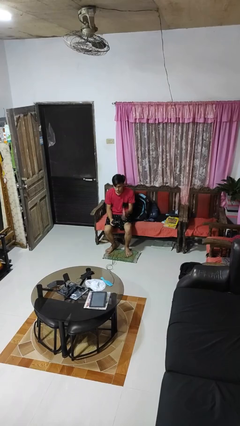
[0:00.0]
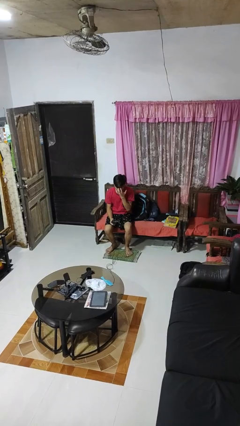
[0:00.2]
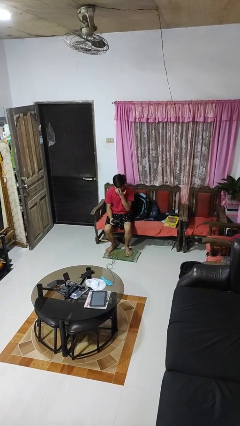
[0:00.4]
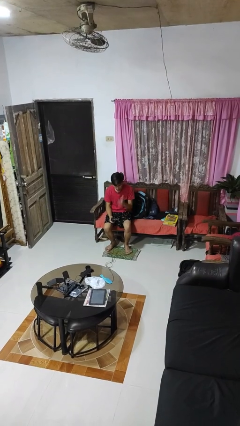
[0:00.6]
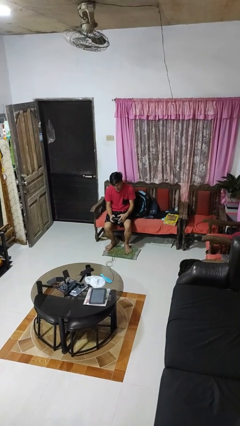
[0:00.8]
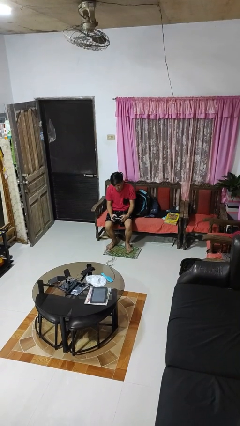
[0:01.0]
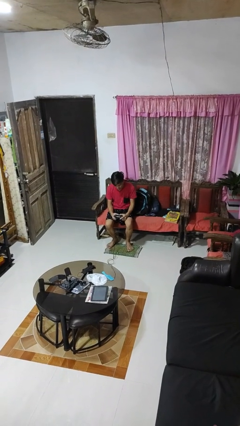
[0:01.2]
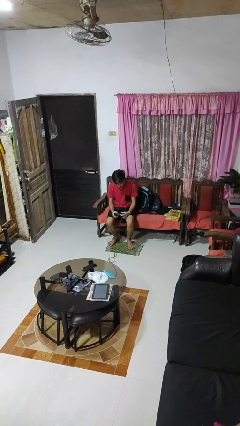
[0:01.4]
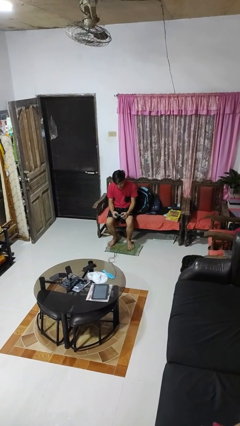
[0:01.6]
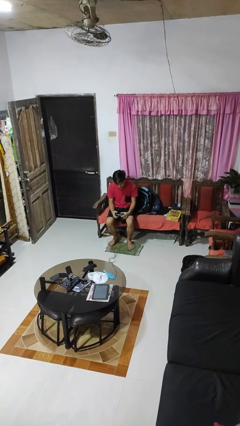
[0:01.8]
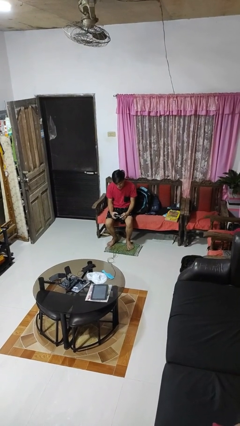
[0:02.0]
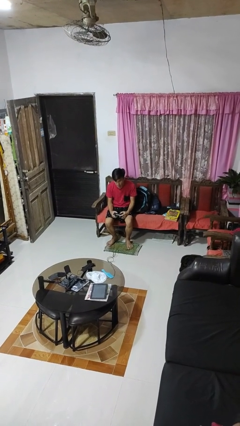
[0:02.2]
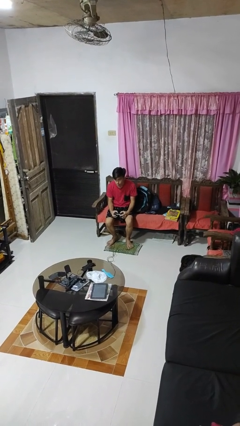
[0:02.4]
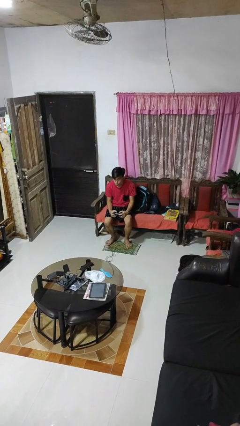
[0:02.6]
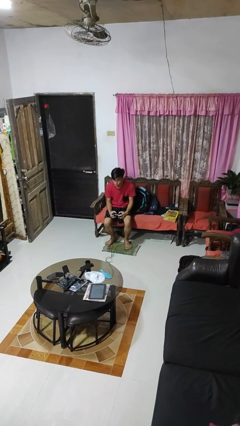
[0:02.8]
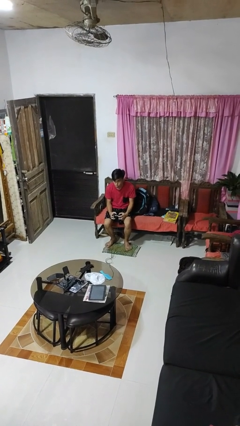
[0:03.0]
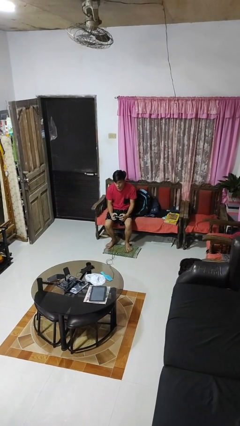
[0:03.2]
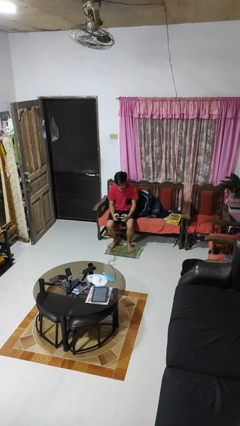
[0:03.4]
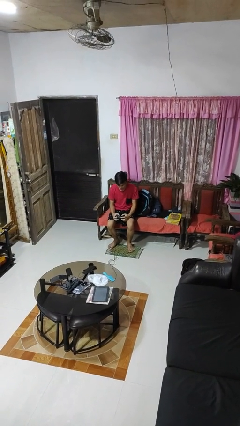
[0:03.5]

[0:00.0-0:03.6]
person interacts with handheld game

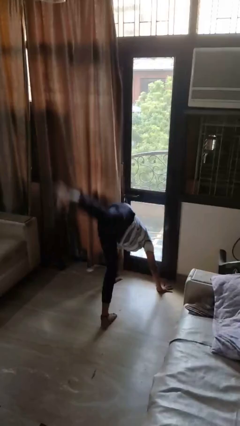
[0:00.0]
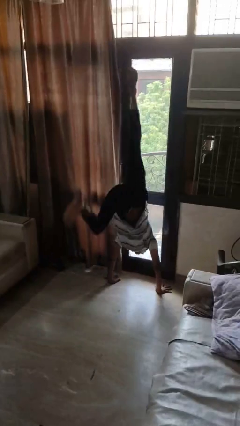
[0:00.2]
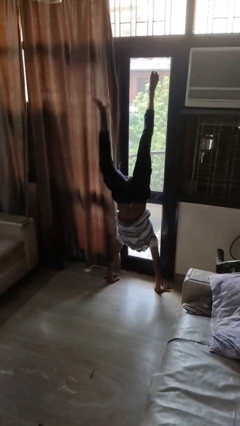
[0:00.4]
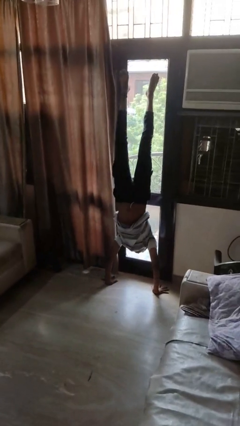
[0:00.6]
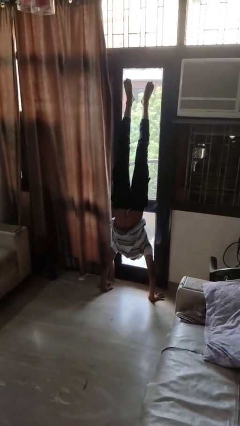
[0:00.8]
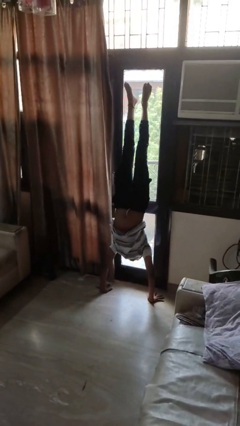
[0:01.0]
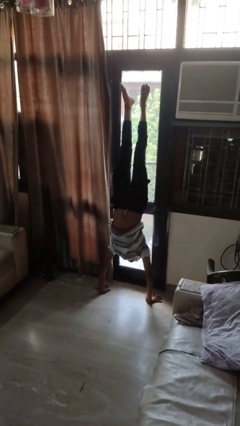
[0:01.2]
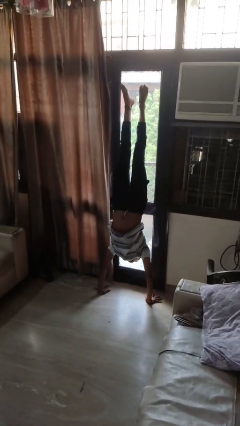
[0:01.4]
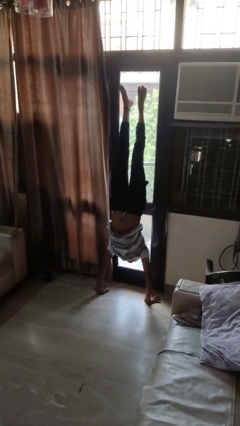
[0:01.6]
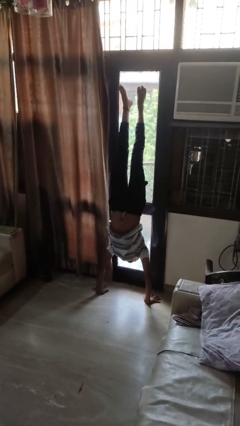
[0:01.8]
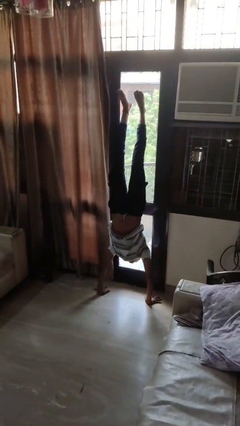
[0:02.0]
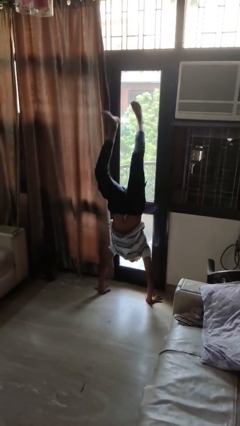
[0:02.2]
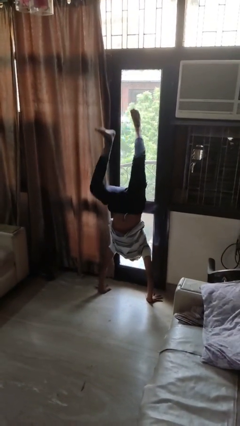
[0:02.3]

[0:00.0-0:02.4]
person handstand

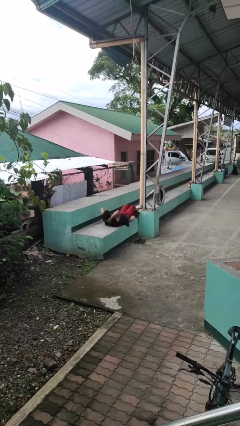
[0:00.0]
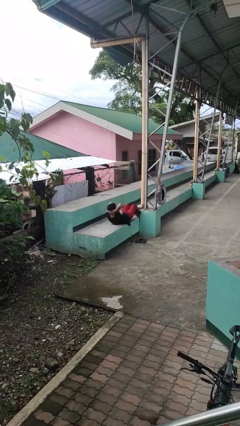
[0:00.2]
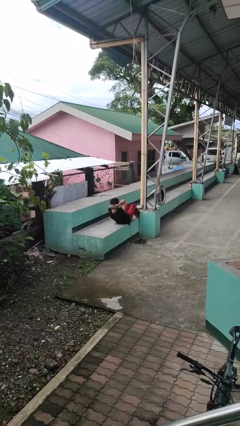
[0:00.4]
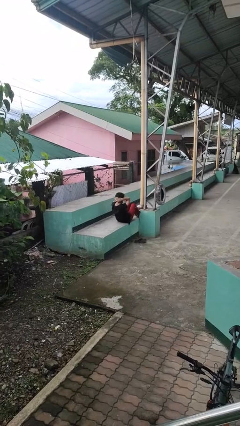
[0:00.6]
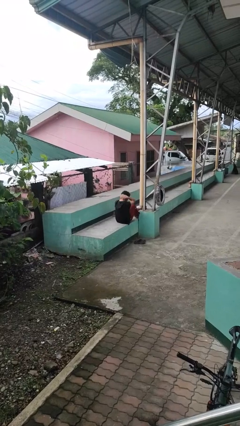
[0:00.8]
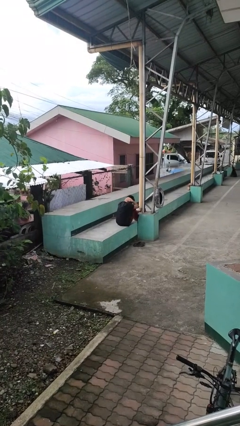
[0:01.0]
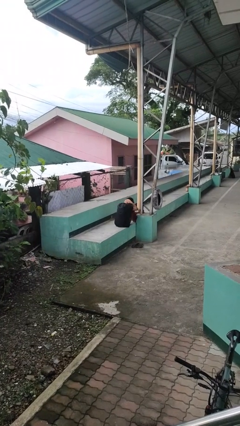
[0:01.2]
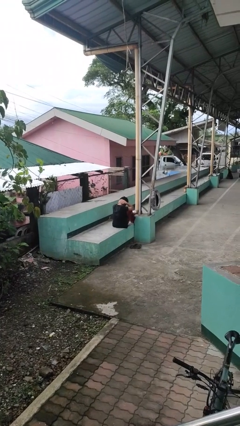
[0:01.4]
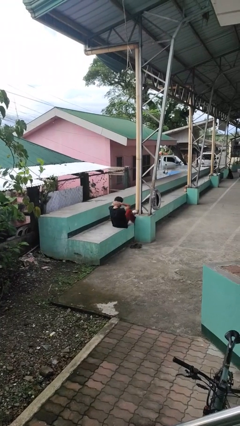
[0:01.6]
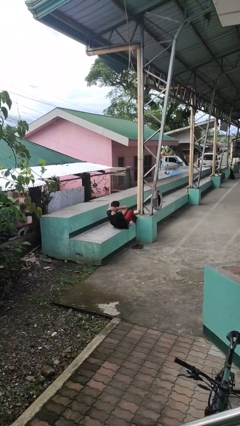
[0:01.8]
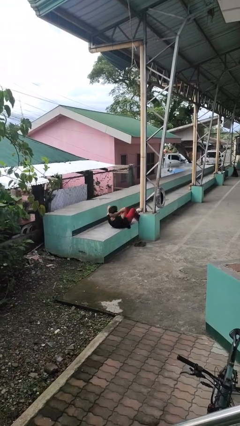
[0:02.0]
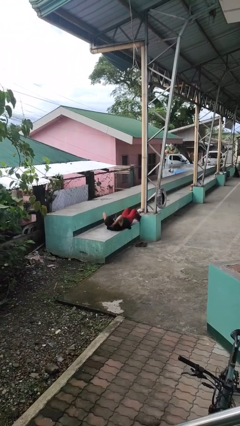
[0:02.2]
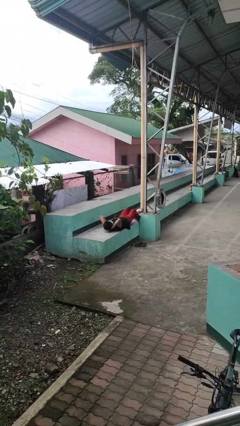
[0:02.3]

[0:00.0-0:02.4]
person exercises with situp

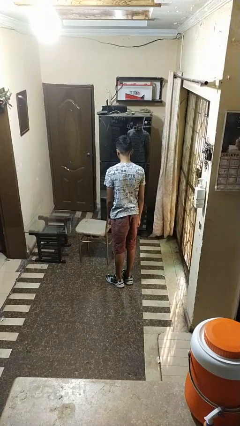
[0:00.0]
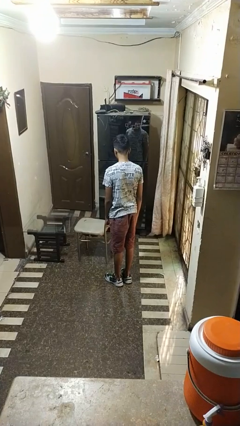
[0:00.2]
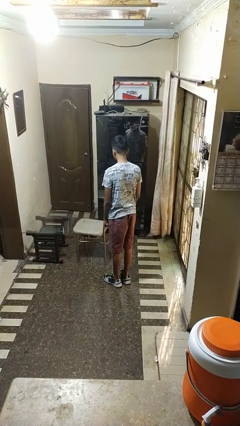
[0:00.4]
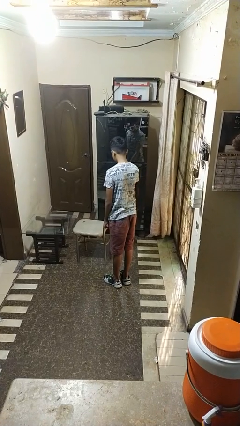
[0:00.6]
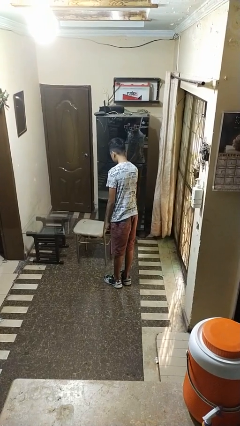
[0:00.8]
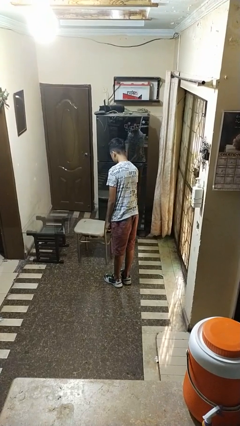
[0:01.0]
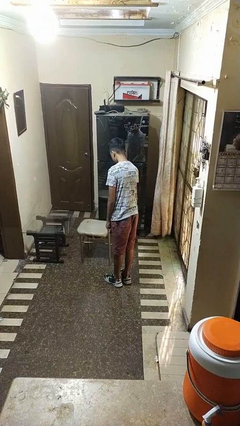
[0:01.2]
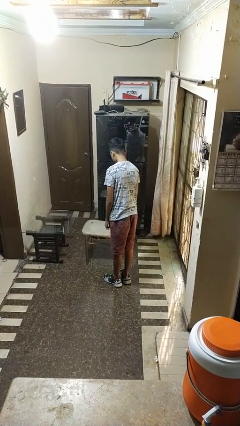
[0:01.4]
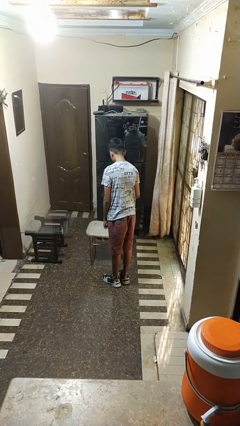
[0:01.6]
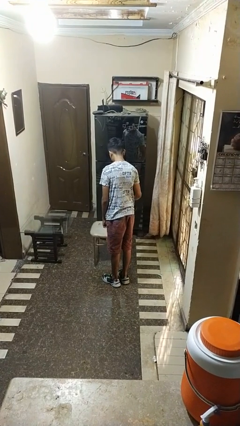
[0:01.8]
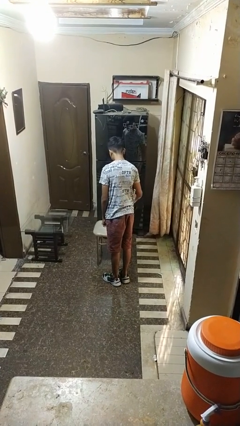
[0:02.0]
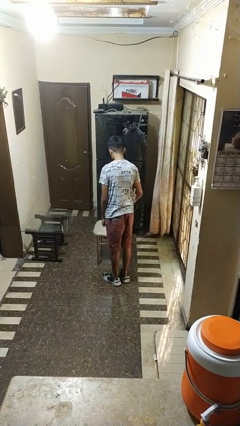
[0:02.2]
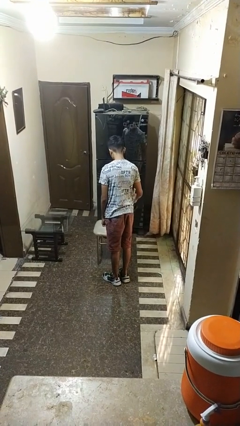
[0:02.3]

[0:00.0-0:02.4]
person pulls out chair

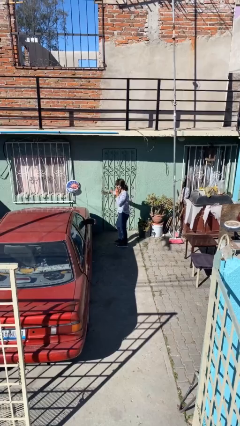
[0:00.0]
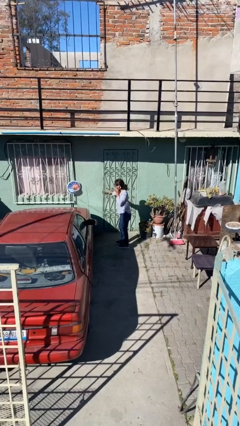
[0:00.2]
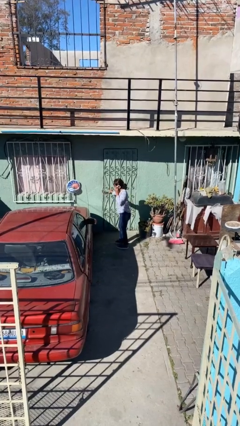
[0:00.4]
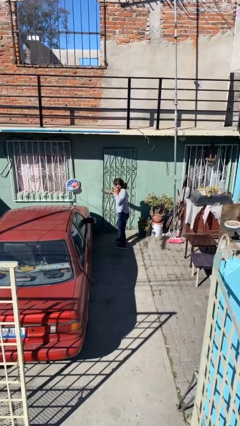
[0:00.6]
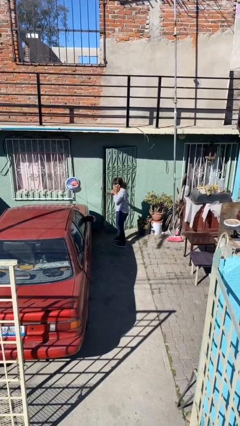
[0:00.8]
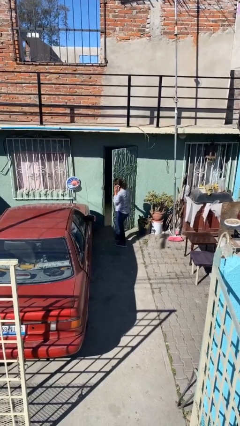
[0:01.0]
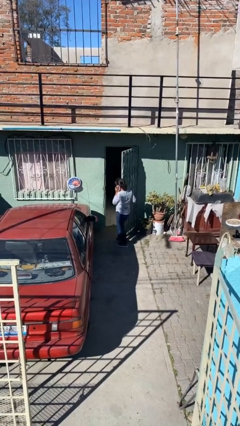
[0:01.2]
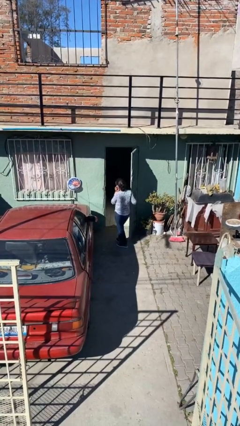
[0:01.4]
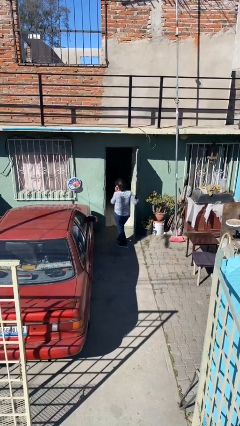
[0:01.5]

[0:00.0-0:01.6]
person opens facility door

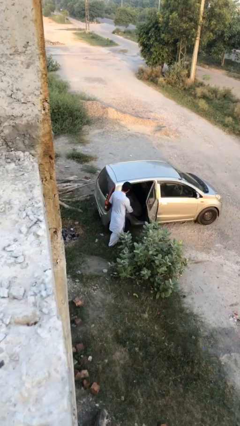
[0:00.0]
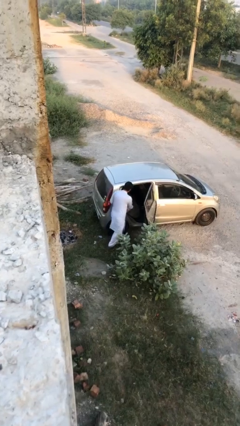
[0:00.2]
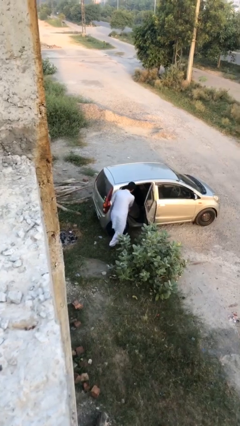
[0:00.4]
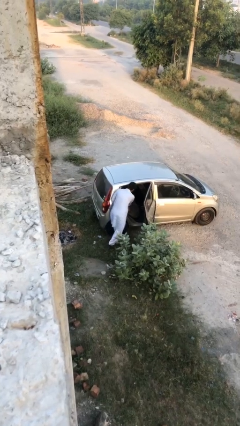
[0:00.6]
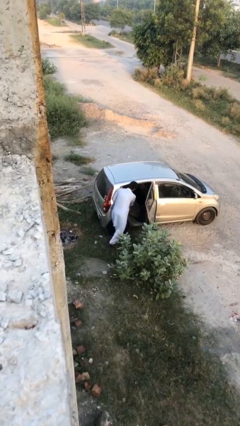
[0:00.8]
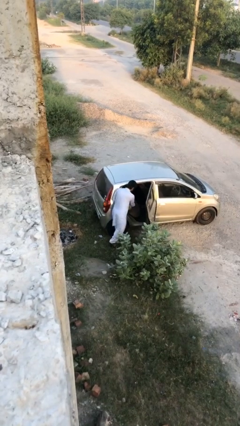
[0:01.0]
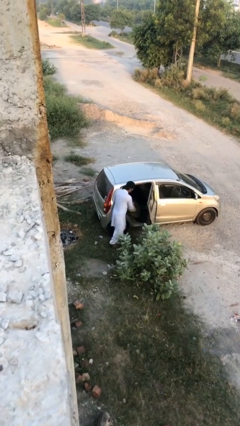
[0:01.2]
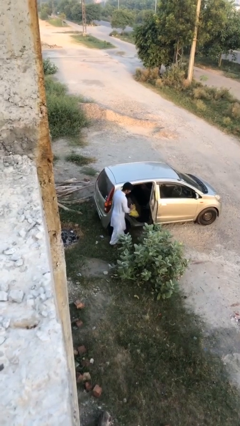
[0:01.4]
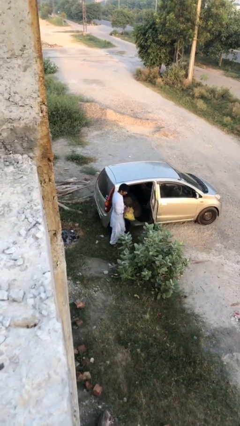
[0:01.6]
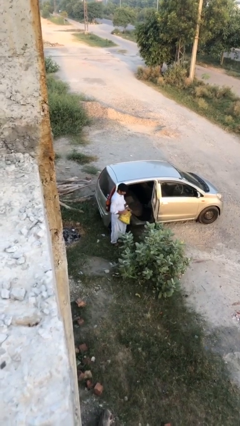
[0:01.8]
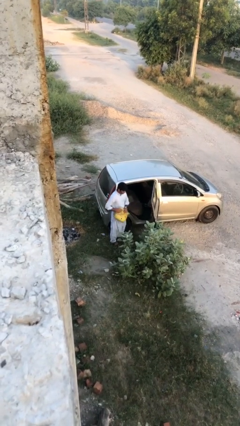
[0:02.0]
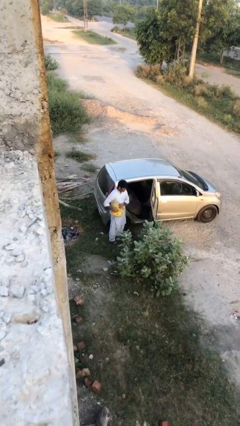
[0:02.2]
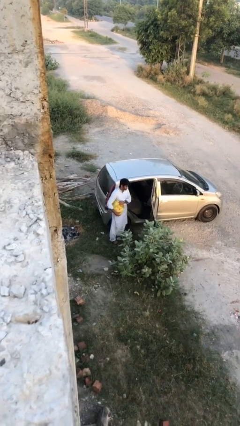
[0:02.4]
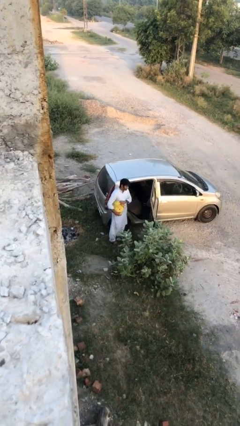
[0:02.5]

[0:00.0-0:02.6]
person unloads car

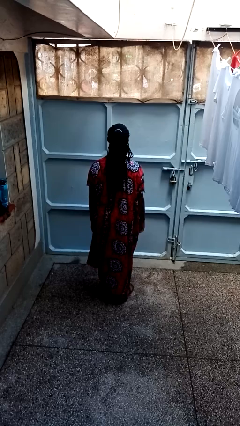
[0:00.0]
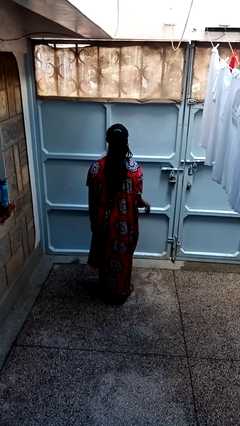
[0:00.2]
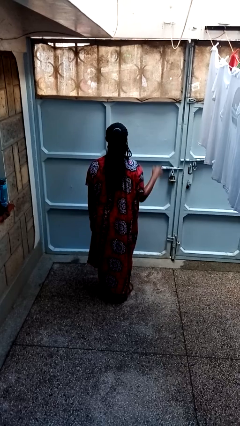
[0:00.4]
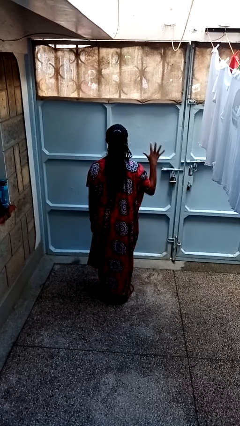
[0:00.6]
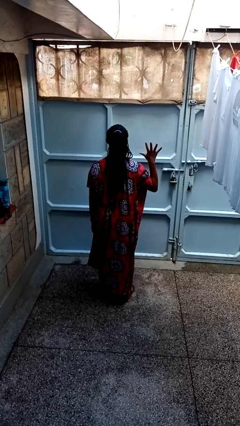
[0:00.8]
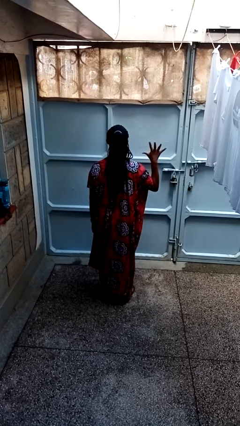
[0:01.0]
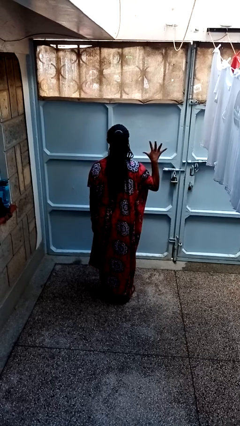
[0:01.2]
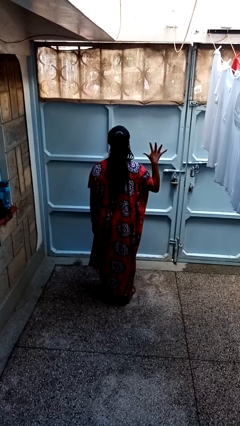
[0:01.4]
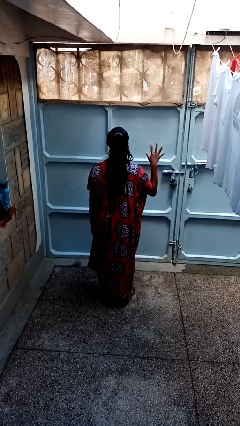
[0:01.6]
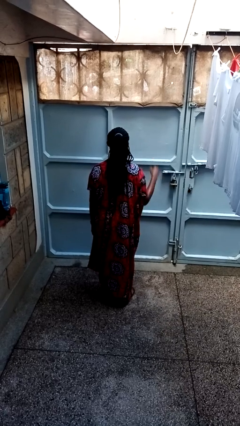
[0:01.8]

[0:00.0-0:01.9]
person gestures number five

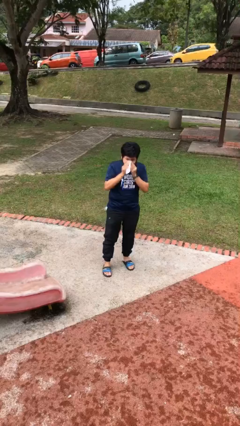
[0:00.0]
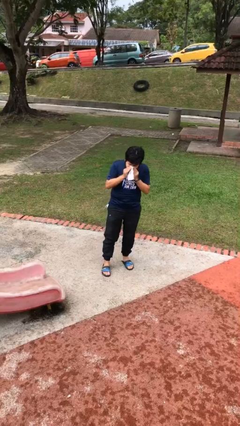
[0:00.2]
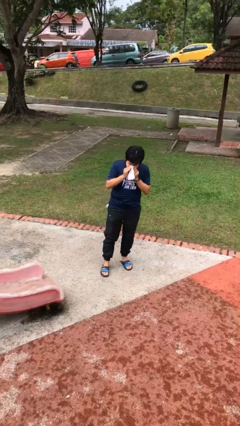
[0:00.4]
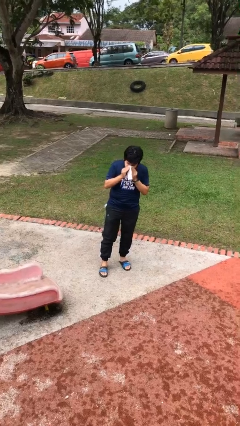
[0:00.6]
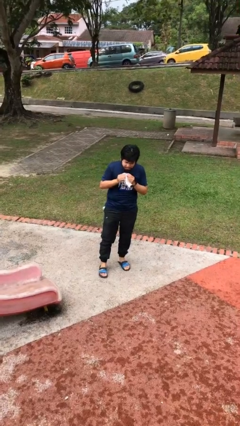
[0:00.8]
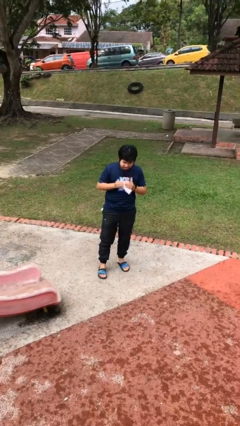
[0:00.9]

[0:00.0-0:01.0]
person blows nose
